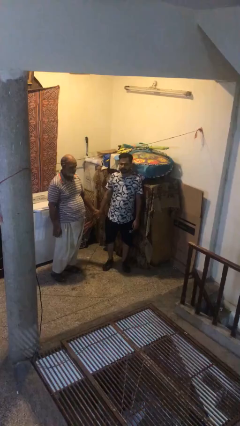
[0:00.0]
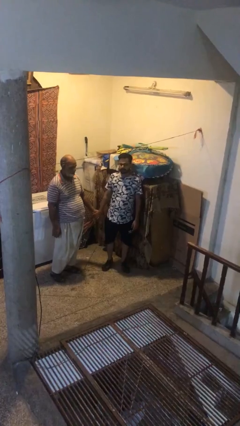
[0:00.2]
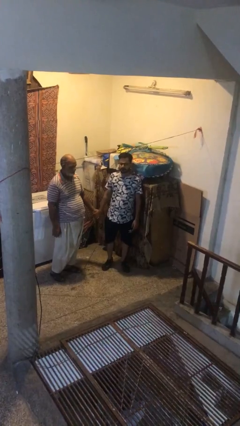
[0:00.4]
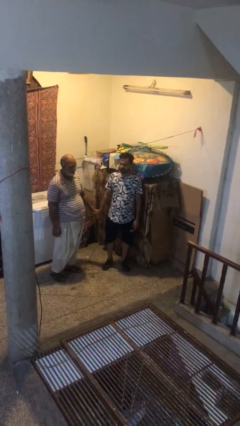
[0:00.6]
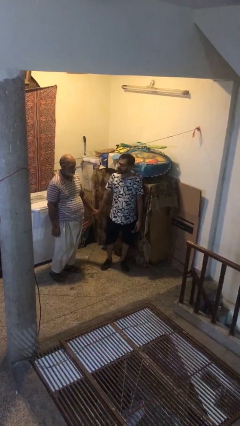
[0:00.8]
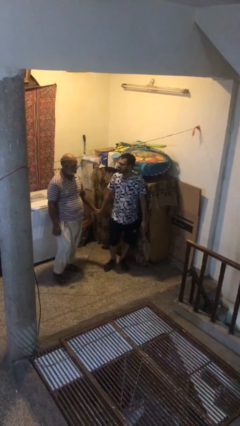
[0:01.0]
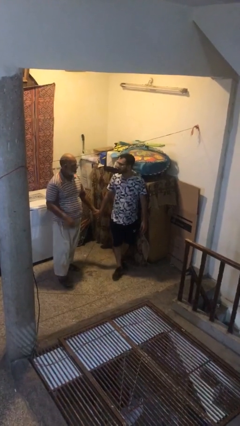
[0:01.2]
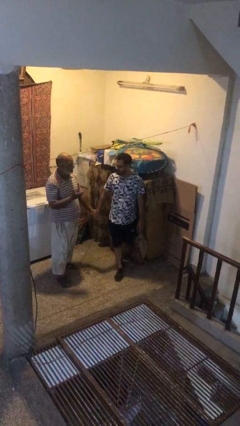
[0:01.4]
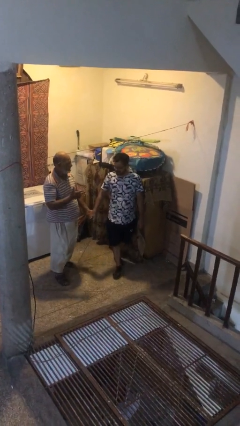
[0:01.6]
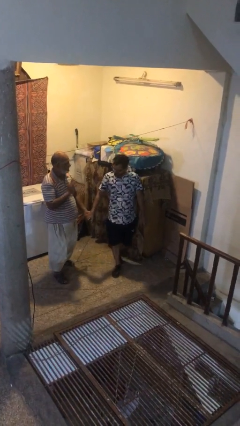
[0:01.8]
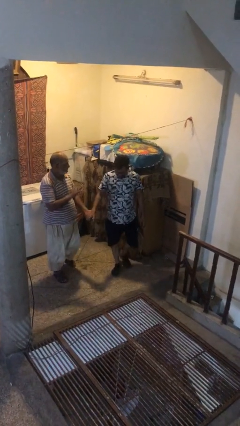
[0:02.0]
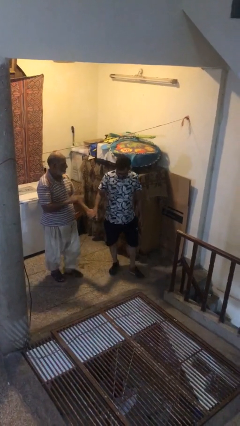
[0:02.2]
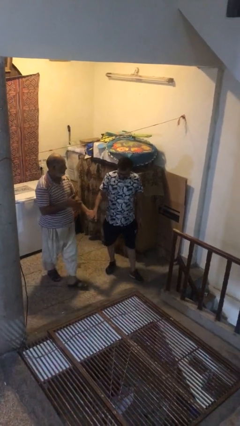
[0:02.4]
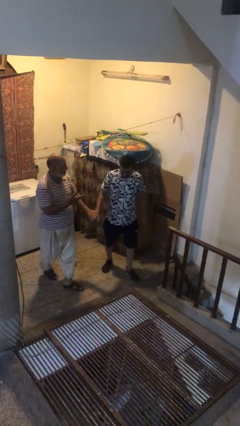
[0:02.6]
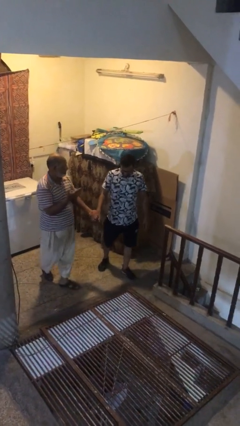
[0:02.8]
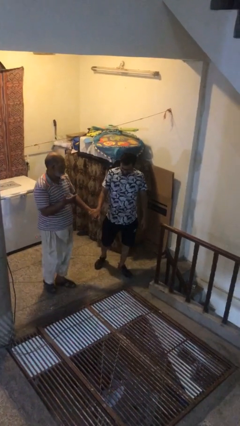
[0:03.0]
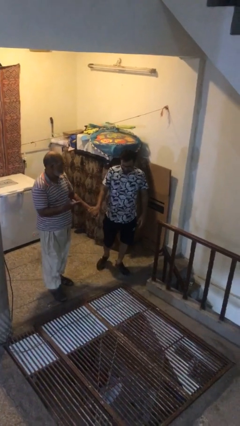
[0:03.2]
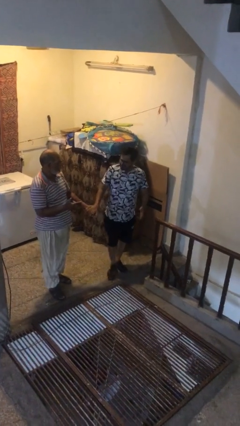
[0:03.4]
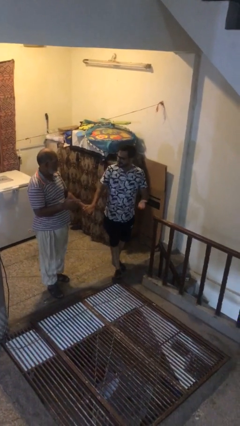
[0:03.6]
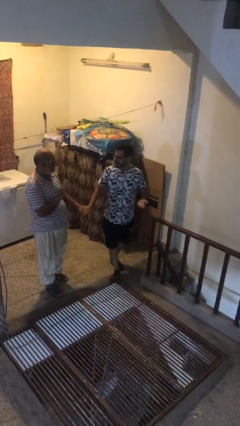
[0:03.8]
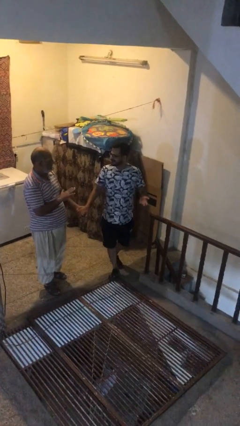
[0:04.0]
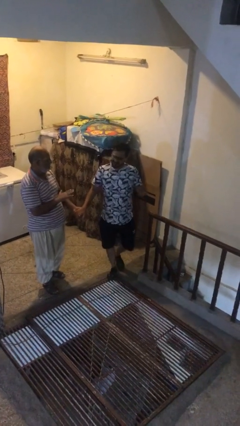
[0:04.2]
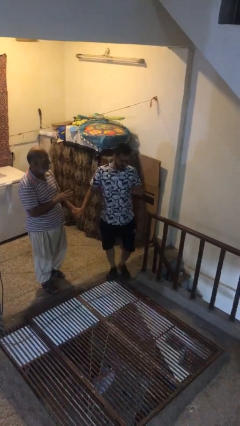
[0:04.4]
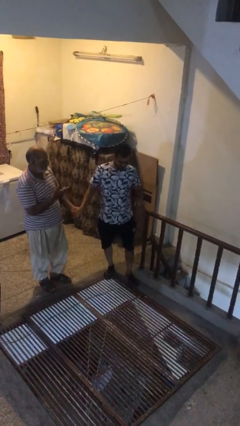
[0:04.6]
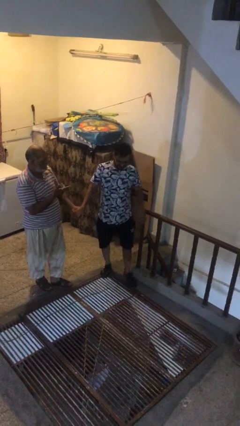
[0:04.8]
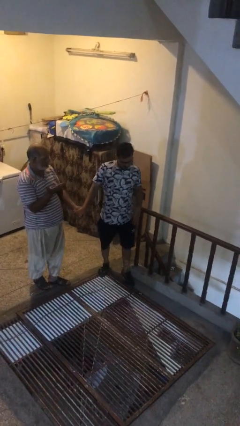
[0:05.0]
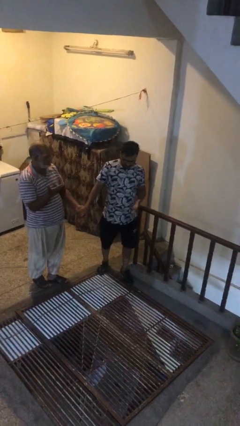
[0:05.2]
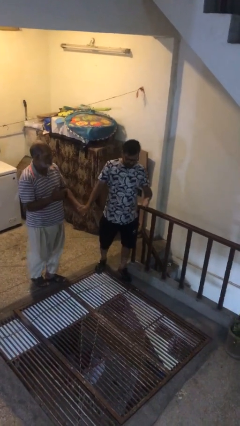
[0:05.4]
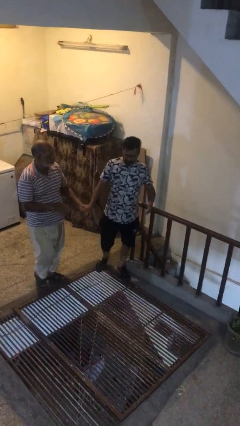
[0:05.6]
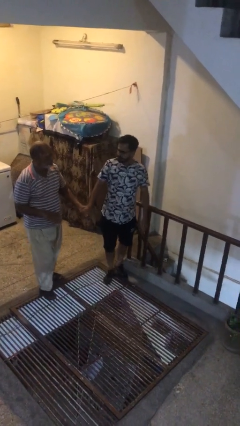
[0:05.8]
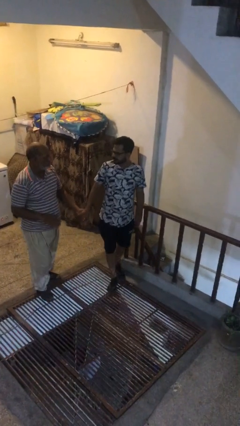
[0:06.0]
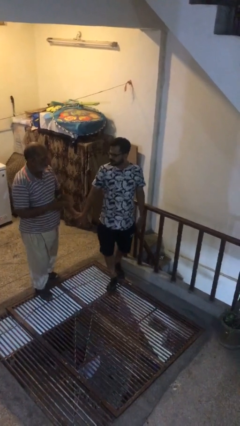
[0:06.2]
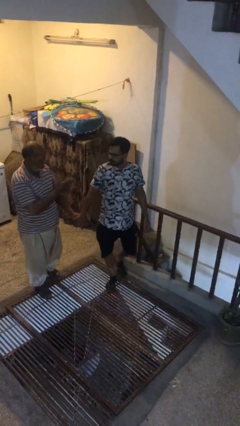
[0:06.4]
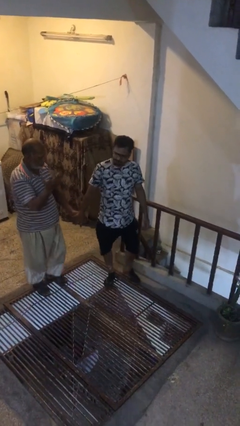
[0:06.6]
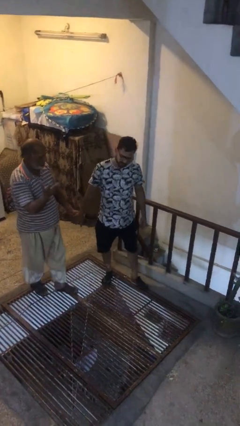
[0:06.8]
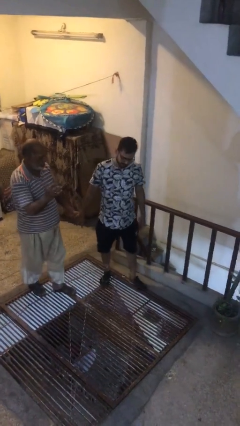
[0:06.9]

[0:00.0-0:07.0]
person holds hand

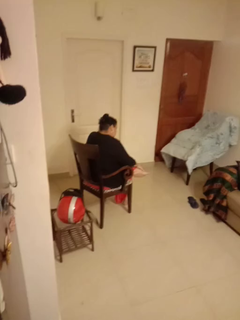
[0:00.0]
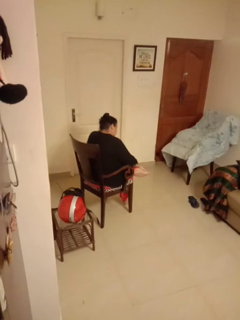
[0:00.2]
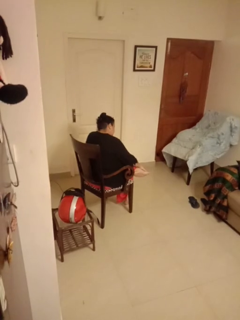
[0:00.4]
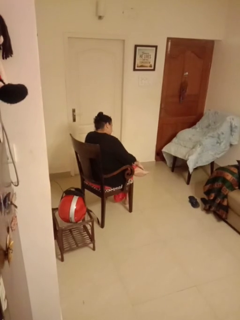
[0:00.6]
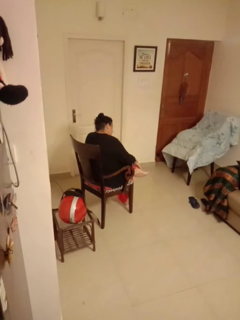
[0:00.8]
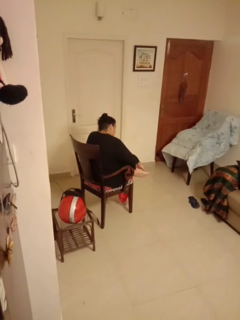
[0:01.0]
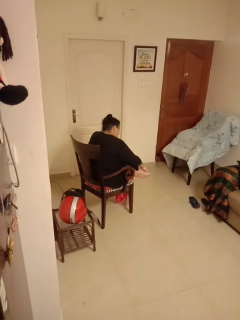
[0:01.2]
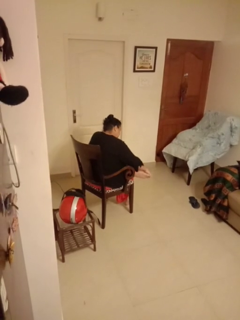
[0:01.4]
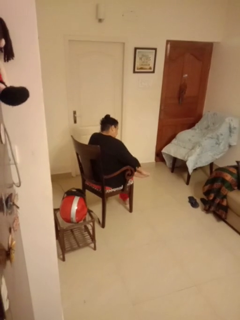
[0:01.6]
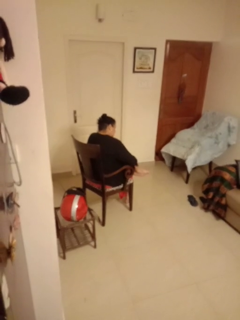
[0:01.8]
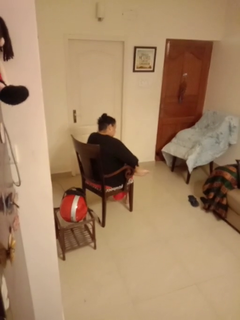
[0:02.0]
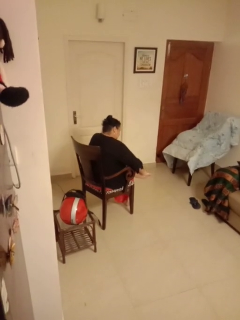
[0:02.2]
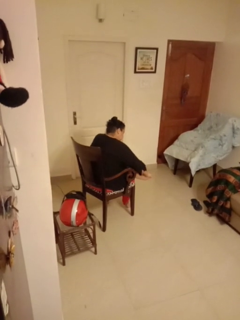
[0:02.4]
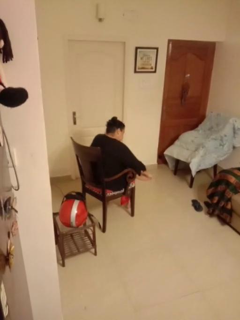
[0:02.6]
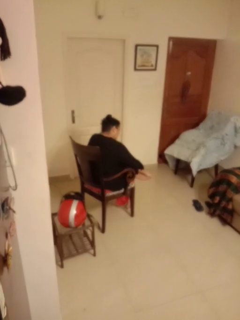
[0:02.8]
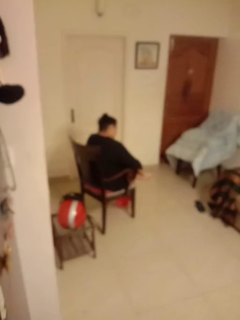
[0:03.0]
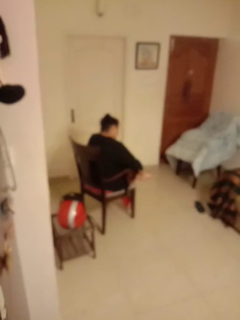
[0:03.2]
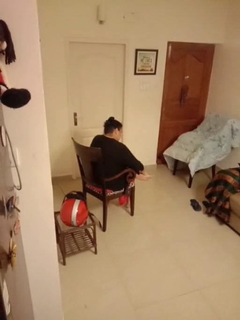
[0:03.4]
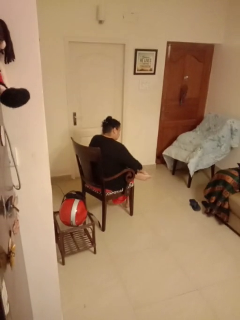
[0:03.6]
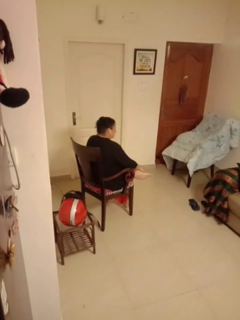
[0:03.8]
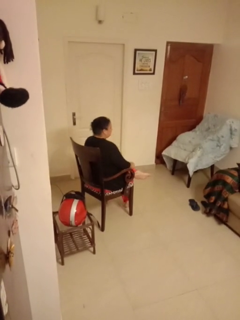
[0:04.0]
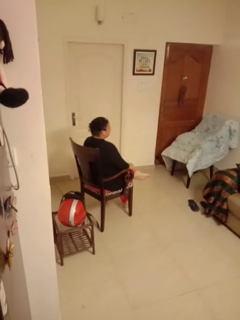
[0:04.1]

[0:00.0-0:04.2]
person rubs foot

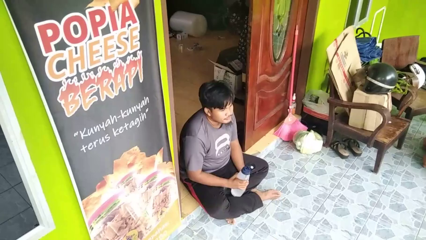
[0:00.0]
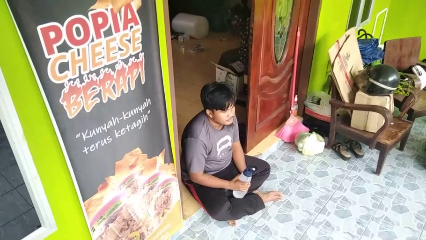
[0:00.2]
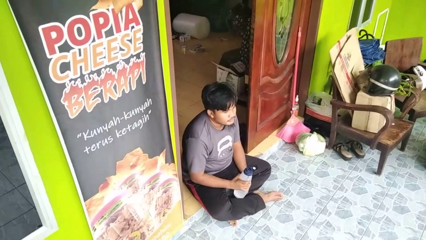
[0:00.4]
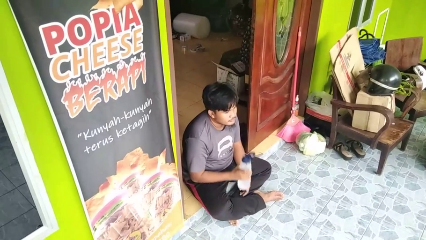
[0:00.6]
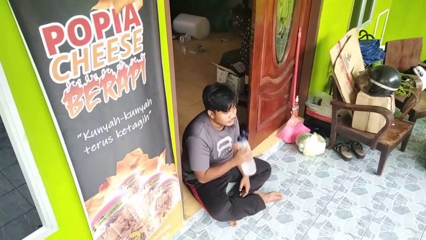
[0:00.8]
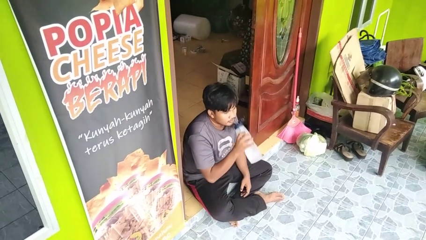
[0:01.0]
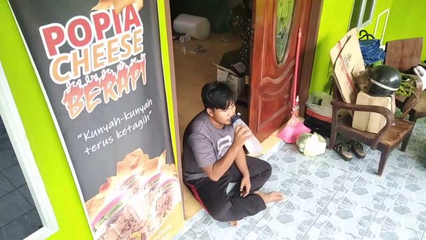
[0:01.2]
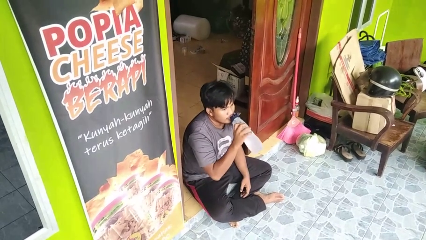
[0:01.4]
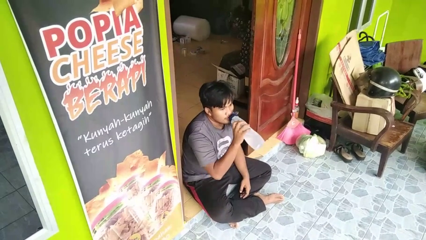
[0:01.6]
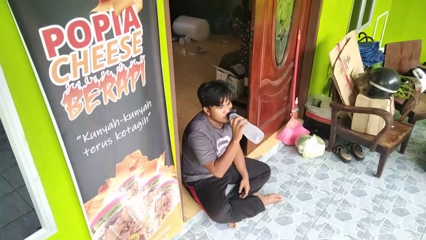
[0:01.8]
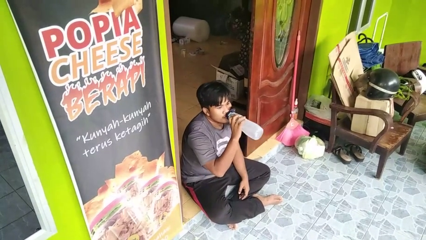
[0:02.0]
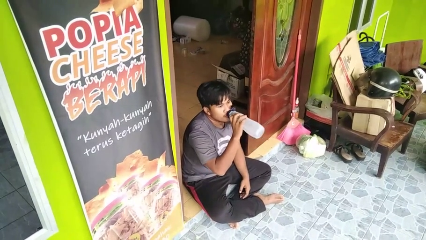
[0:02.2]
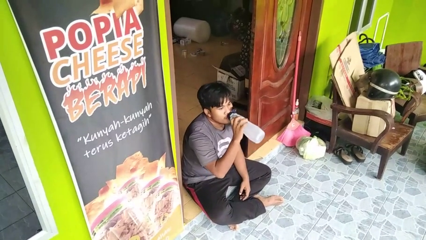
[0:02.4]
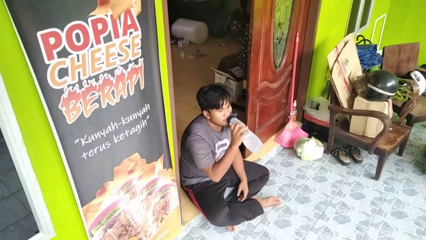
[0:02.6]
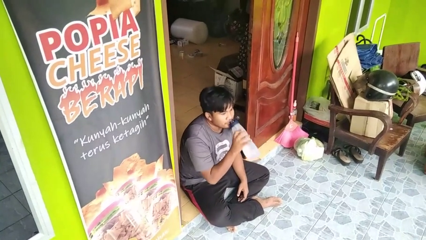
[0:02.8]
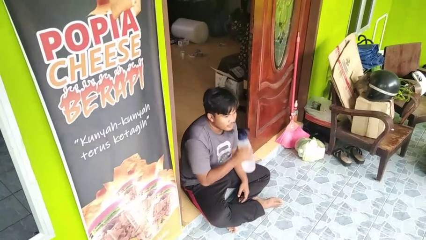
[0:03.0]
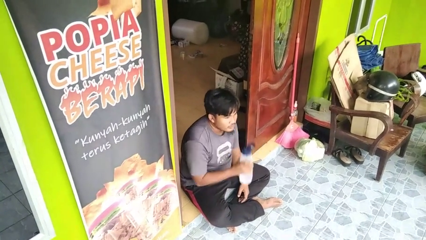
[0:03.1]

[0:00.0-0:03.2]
person drinks from bottle

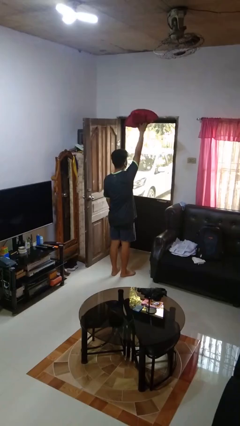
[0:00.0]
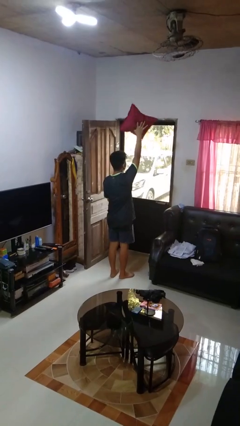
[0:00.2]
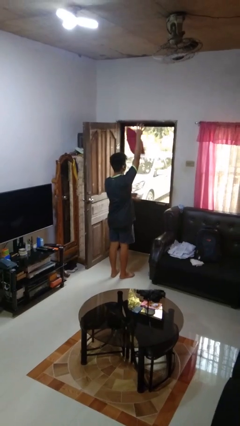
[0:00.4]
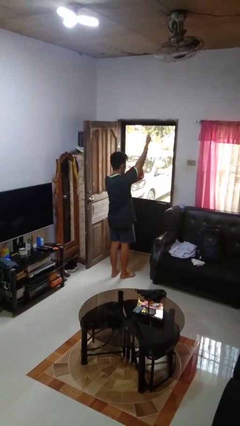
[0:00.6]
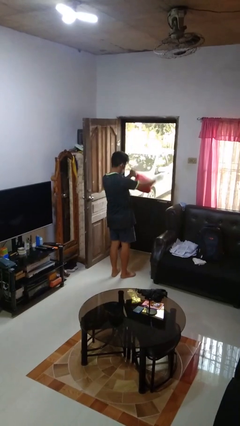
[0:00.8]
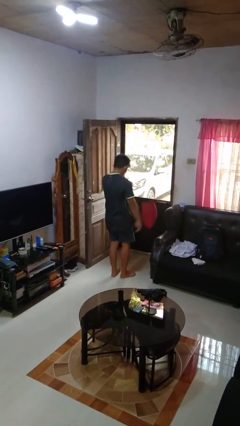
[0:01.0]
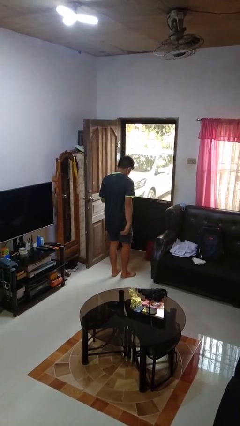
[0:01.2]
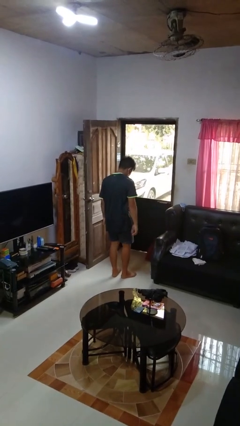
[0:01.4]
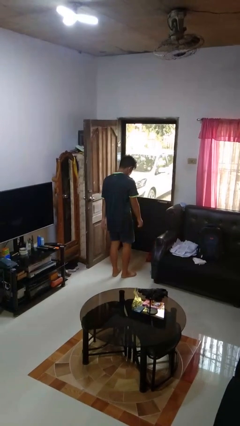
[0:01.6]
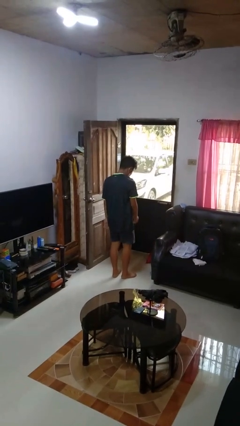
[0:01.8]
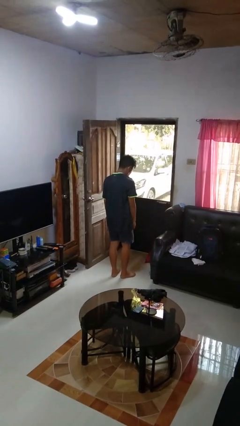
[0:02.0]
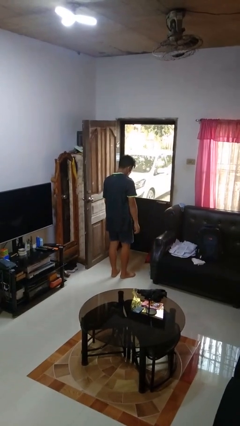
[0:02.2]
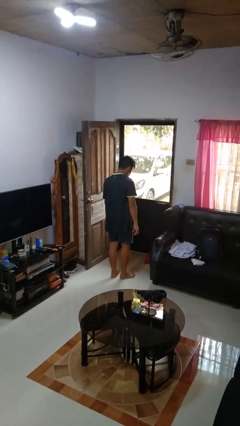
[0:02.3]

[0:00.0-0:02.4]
person drops object

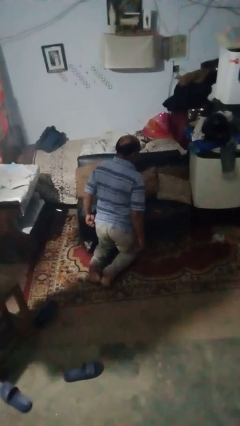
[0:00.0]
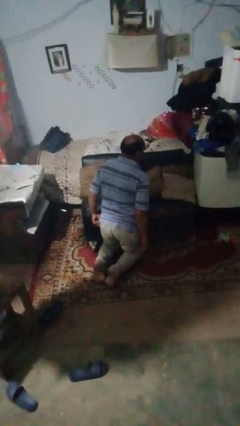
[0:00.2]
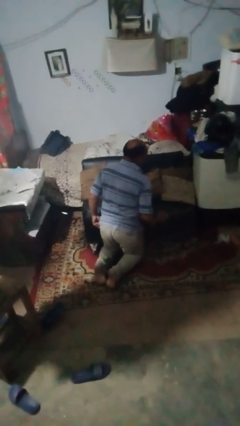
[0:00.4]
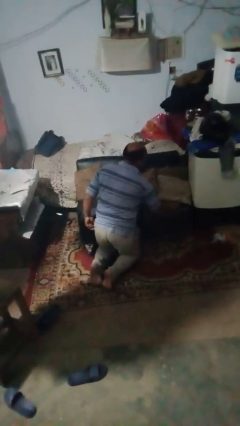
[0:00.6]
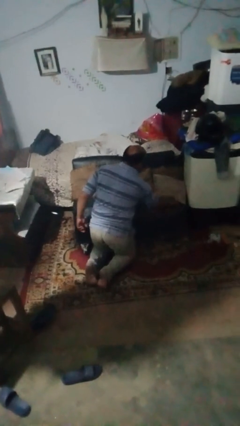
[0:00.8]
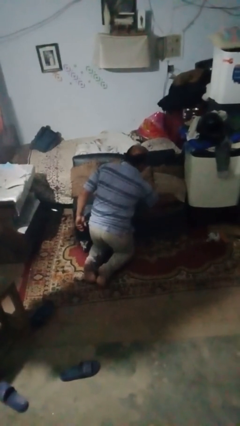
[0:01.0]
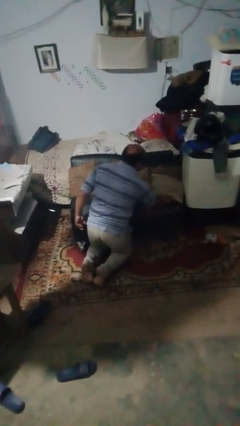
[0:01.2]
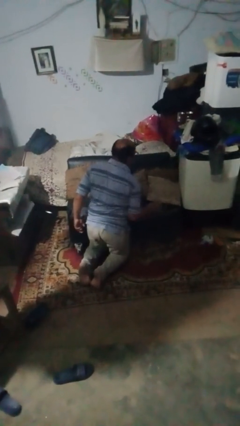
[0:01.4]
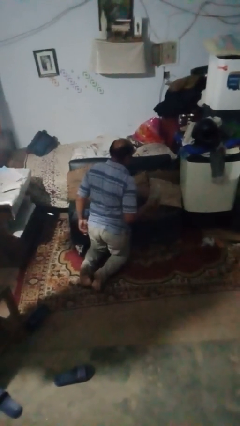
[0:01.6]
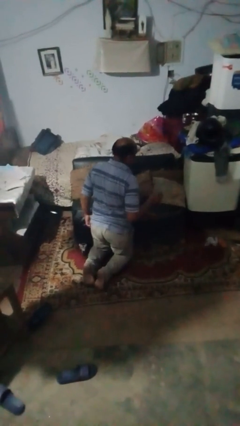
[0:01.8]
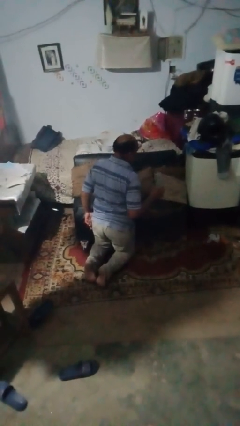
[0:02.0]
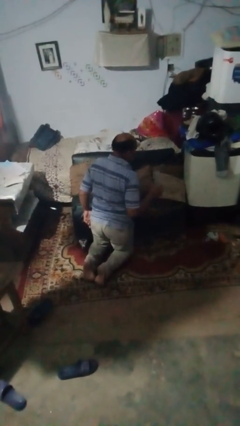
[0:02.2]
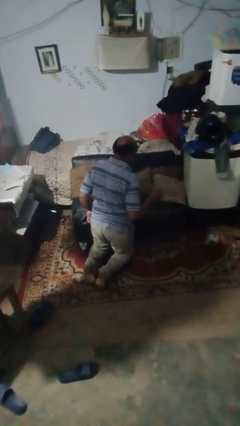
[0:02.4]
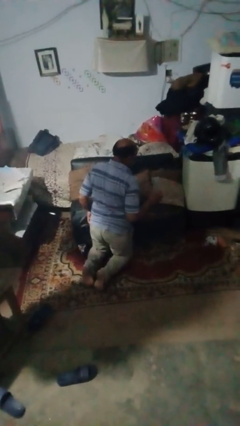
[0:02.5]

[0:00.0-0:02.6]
person searches in couch
